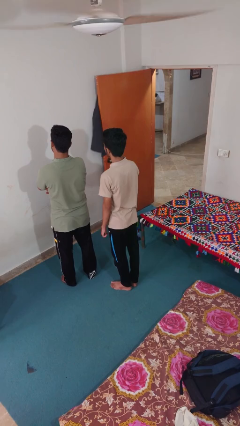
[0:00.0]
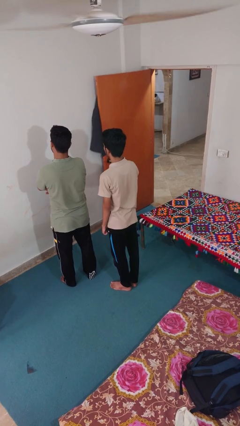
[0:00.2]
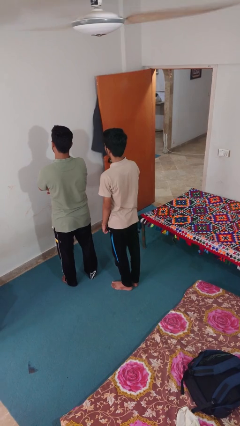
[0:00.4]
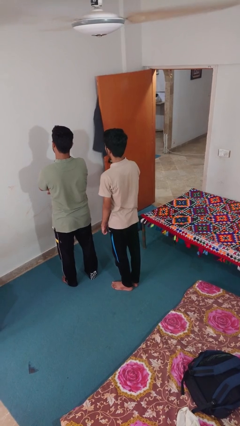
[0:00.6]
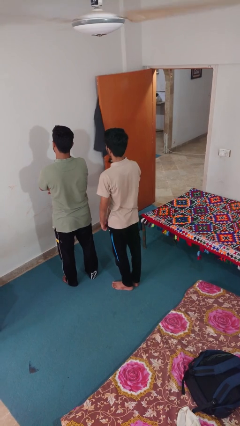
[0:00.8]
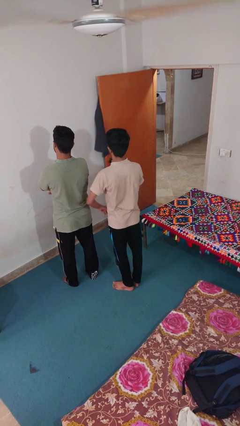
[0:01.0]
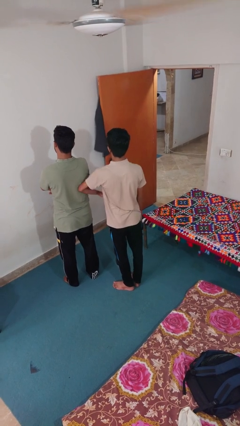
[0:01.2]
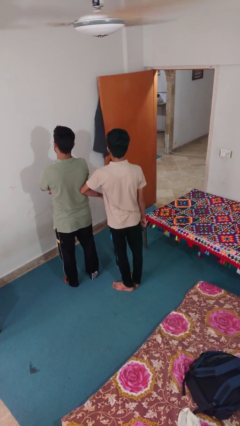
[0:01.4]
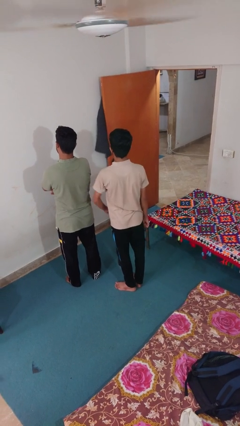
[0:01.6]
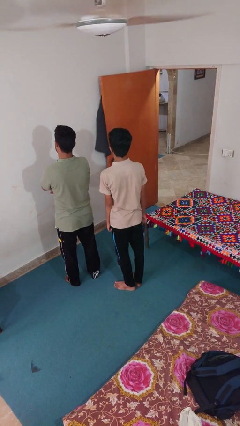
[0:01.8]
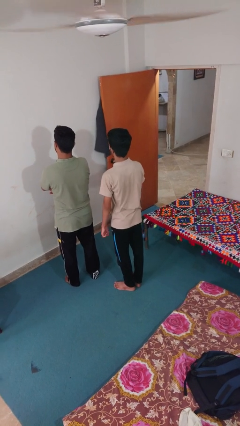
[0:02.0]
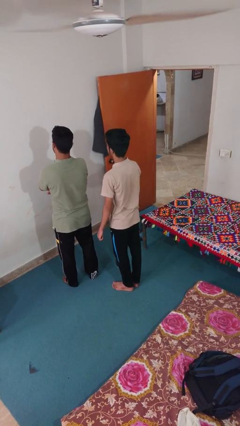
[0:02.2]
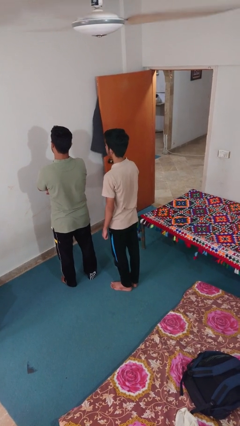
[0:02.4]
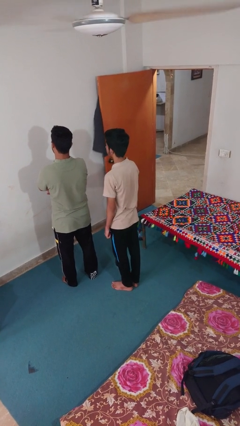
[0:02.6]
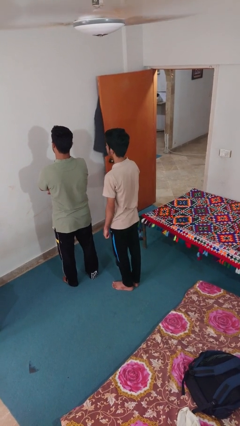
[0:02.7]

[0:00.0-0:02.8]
person nudges person with elbow

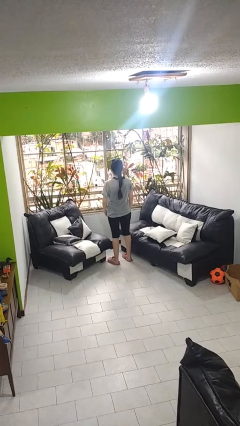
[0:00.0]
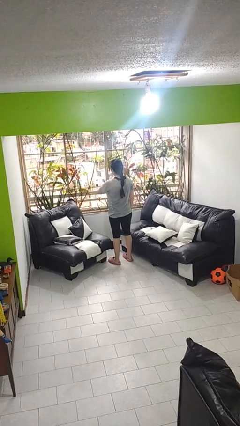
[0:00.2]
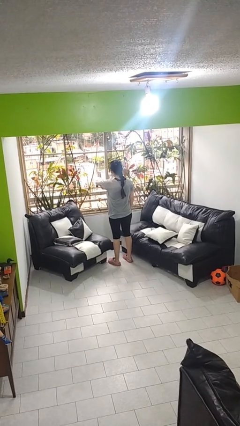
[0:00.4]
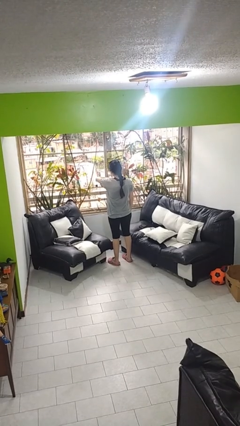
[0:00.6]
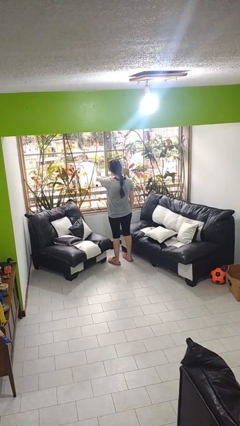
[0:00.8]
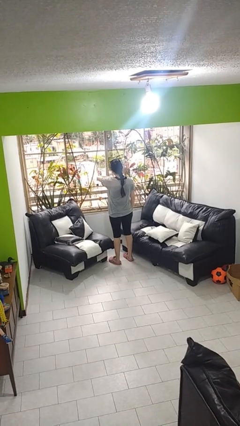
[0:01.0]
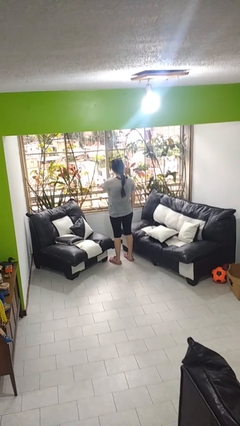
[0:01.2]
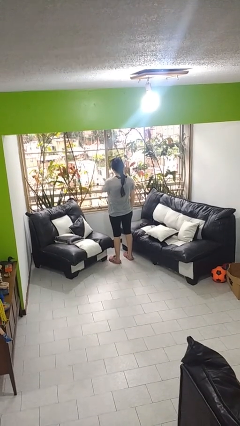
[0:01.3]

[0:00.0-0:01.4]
person looks at wristwatch

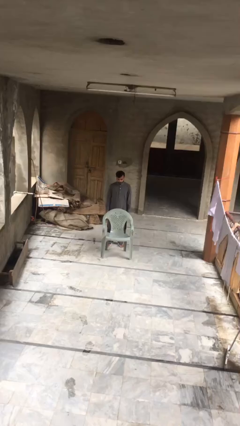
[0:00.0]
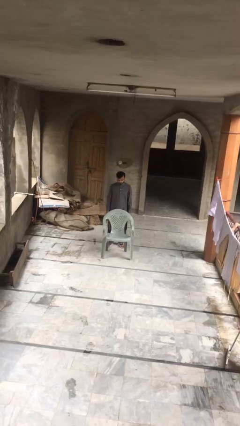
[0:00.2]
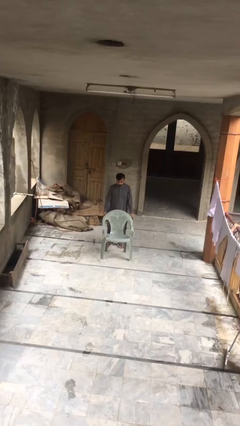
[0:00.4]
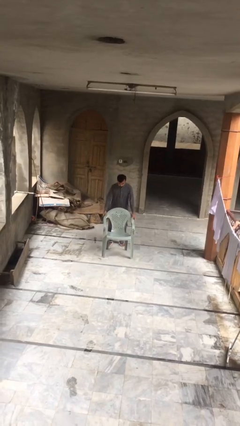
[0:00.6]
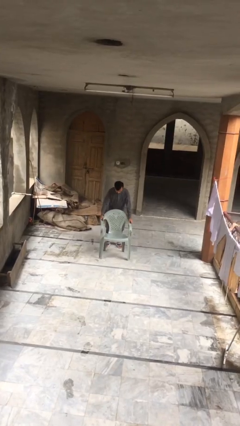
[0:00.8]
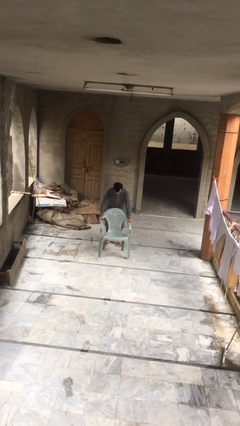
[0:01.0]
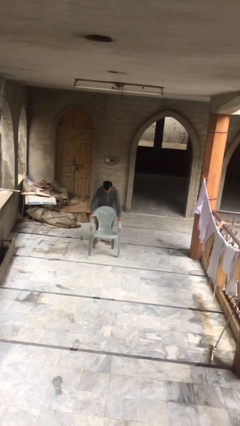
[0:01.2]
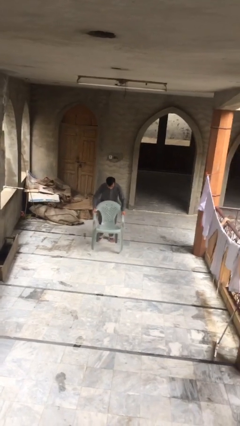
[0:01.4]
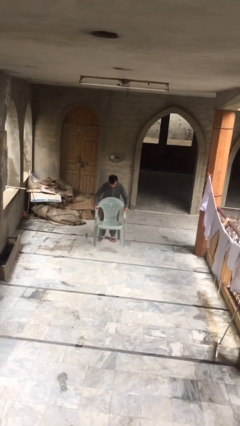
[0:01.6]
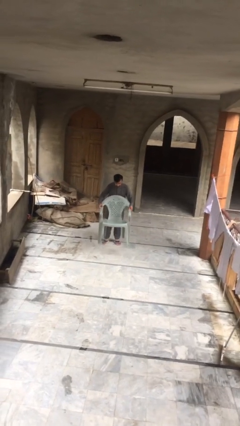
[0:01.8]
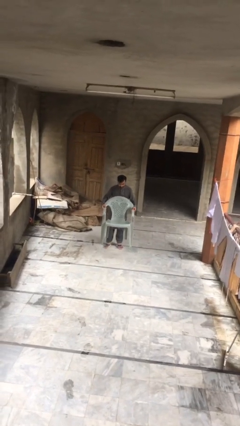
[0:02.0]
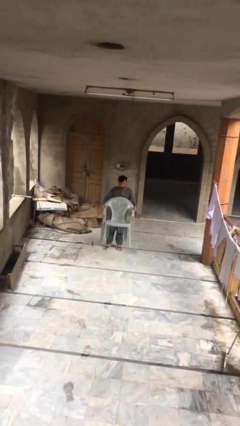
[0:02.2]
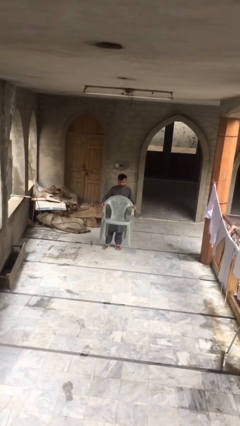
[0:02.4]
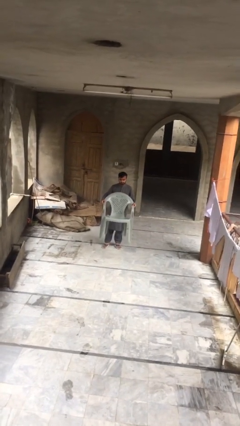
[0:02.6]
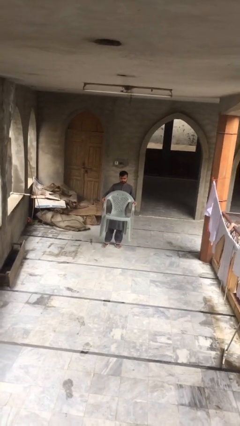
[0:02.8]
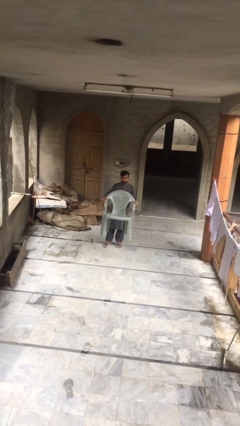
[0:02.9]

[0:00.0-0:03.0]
person picks up object from floor

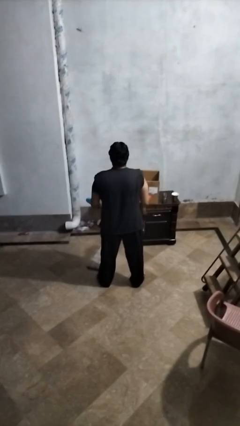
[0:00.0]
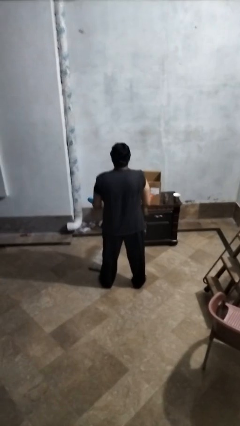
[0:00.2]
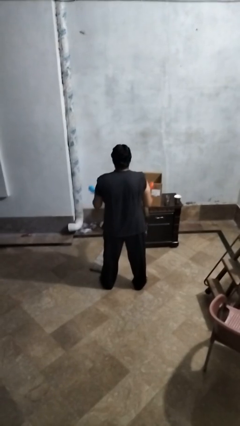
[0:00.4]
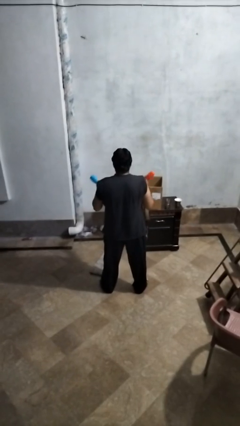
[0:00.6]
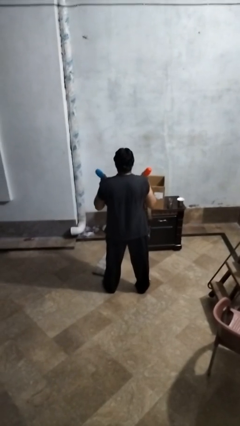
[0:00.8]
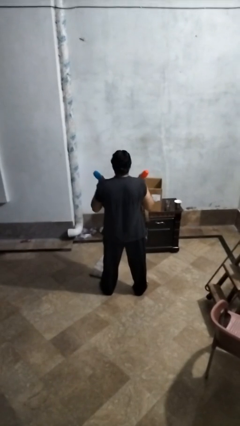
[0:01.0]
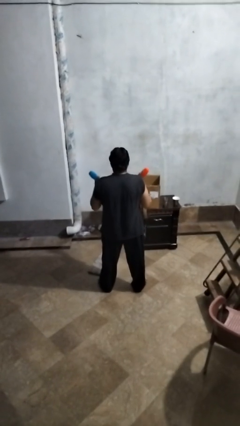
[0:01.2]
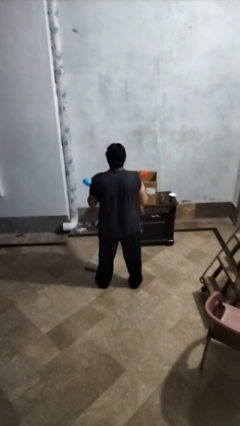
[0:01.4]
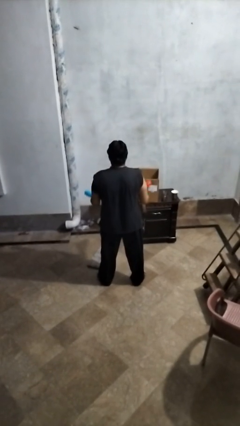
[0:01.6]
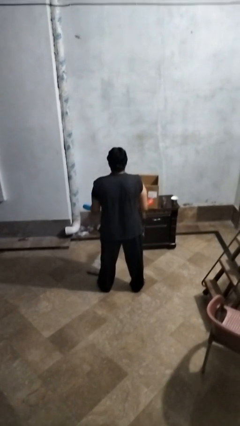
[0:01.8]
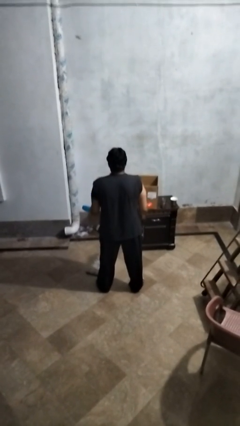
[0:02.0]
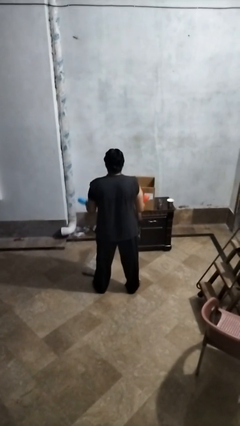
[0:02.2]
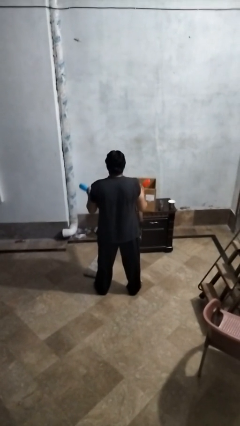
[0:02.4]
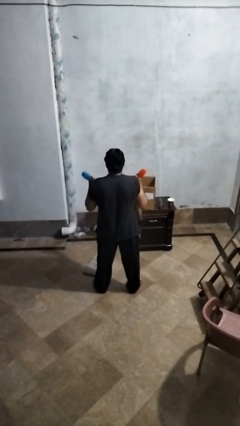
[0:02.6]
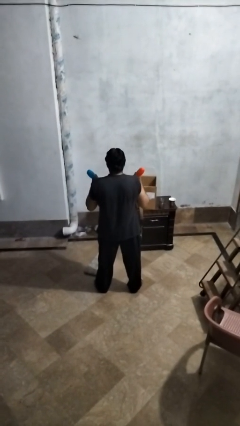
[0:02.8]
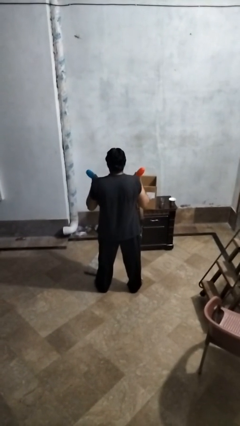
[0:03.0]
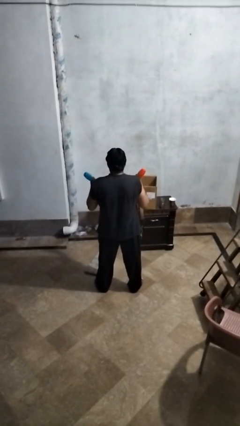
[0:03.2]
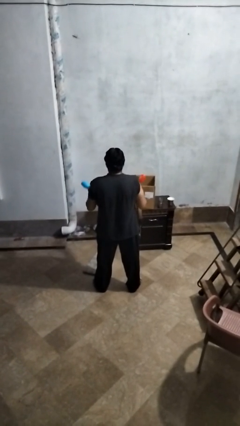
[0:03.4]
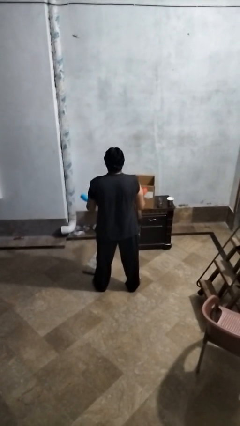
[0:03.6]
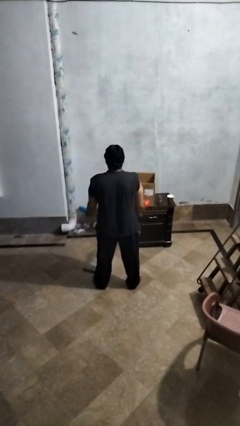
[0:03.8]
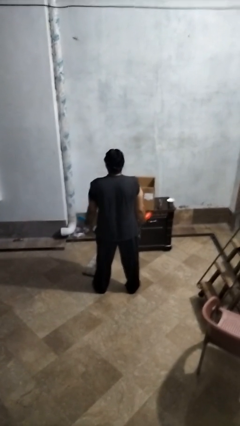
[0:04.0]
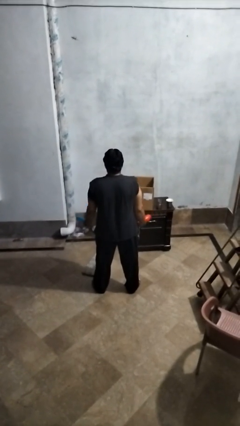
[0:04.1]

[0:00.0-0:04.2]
person lifts dumbbells

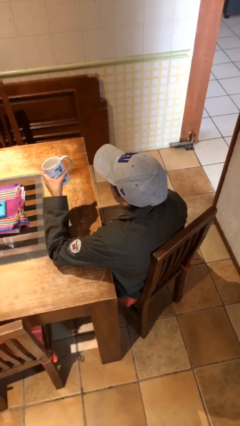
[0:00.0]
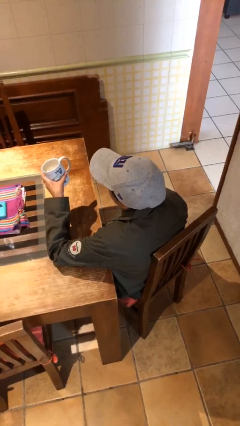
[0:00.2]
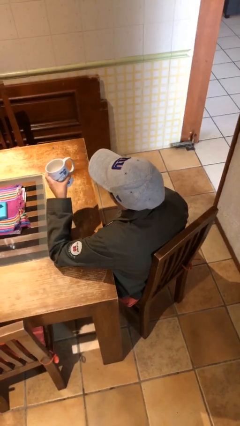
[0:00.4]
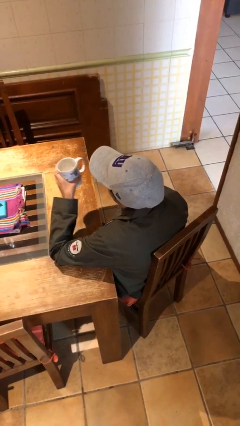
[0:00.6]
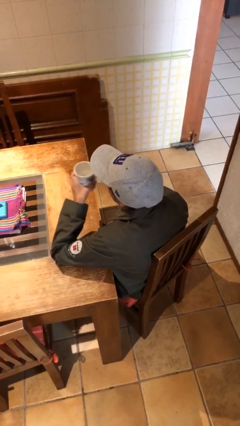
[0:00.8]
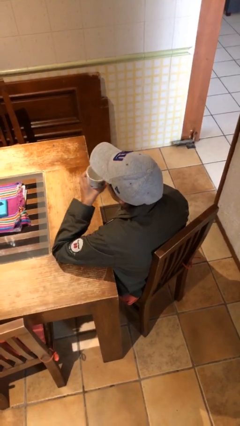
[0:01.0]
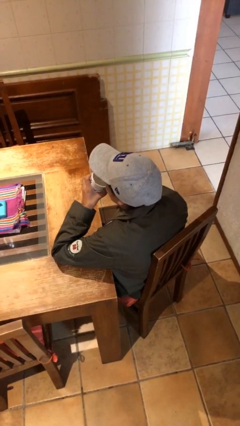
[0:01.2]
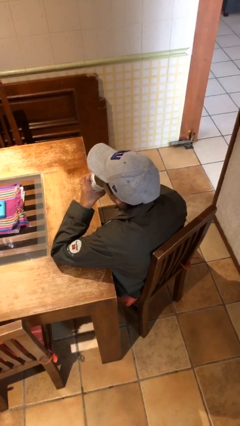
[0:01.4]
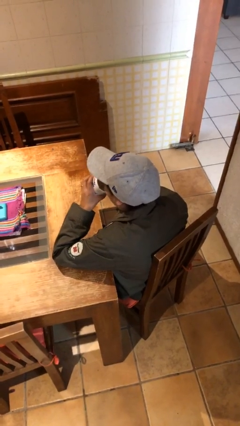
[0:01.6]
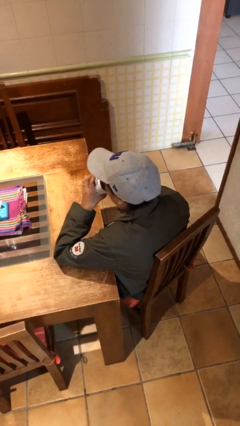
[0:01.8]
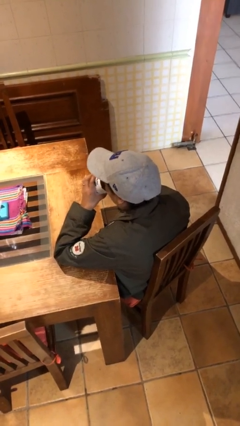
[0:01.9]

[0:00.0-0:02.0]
person drinks from mug

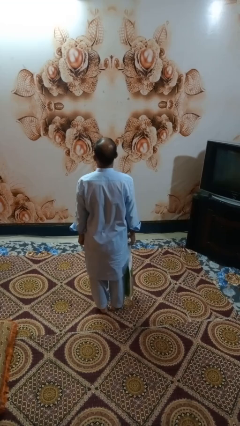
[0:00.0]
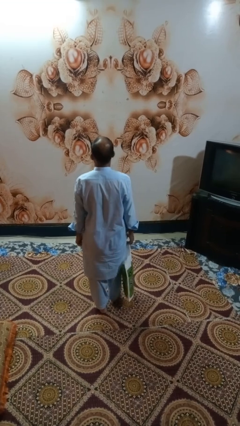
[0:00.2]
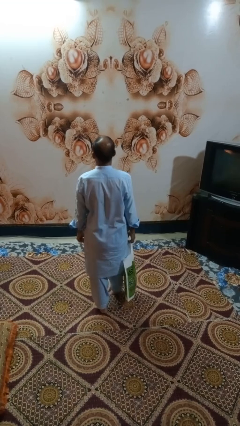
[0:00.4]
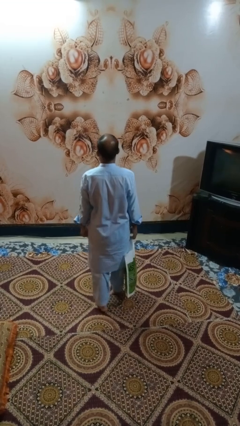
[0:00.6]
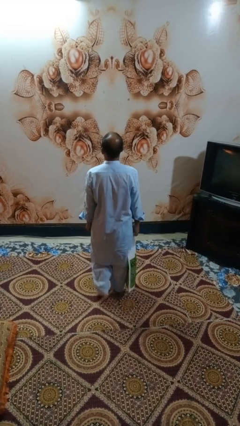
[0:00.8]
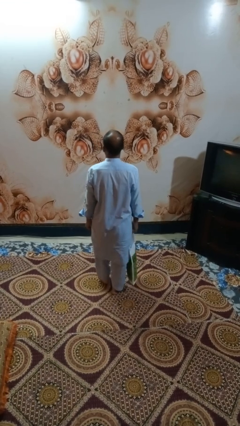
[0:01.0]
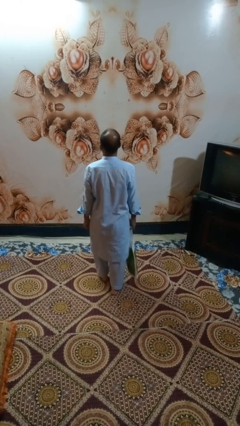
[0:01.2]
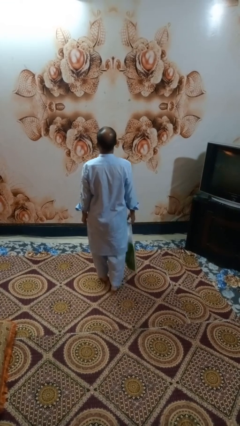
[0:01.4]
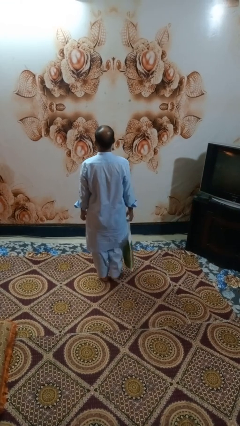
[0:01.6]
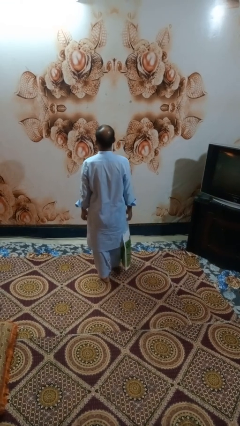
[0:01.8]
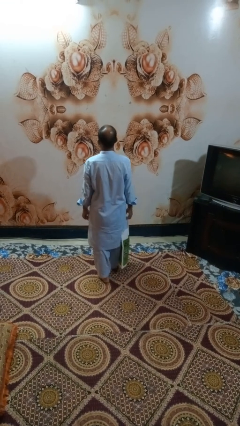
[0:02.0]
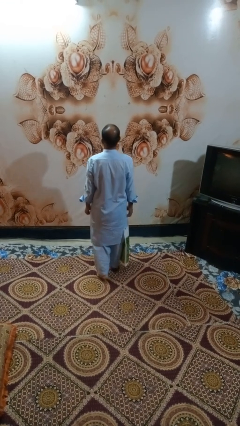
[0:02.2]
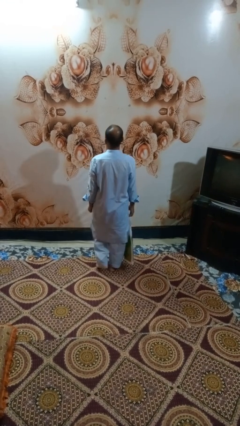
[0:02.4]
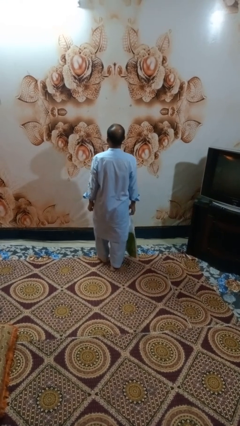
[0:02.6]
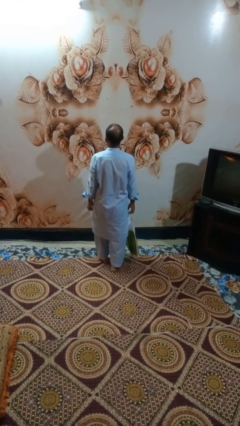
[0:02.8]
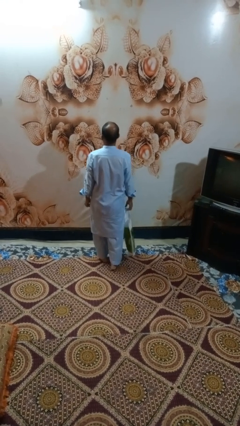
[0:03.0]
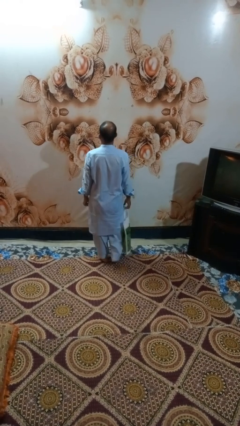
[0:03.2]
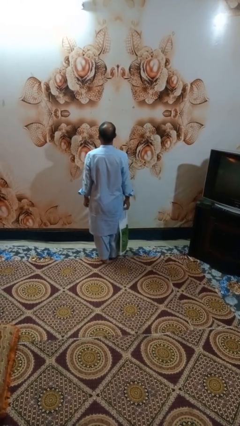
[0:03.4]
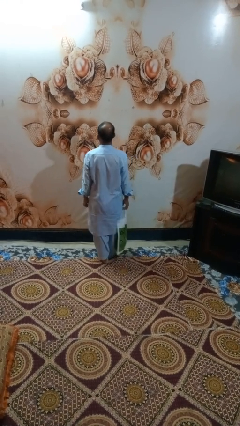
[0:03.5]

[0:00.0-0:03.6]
person carries groceries
